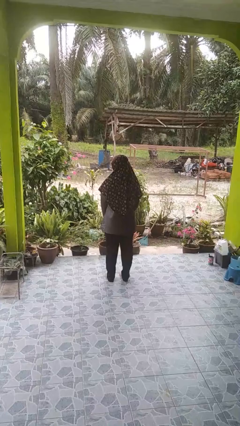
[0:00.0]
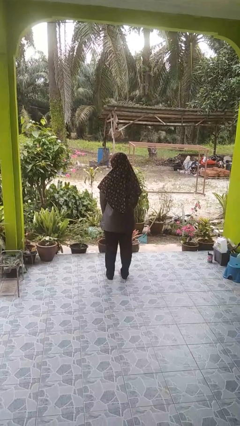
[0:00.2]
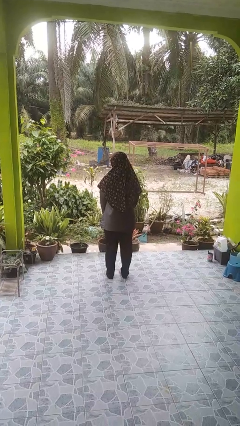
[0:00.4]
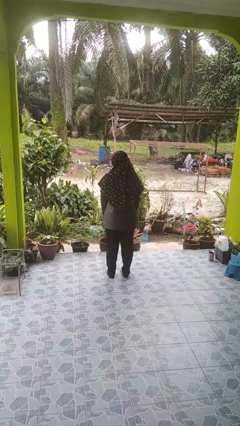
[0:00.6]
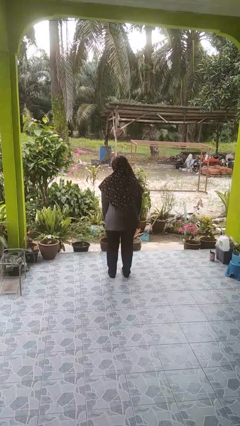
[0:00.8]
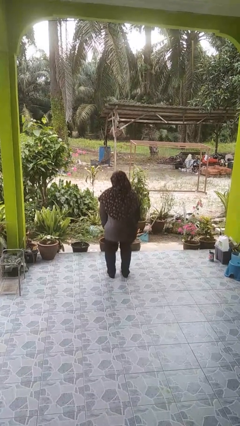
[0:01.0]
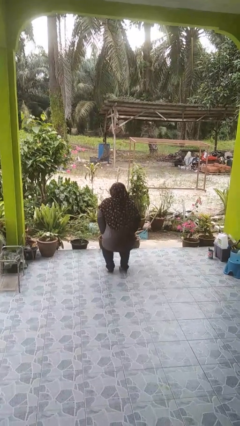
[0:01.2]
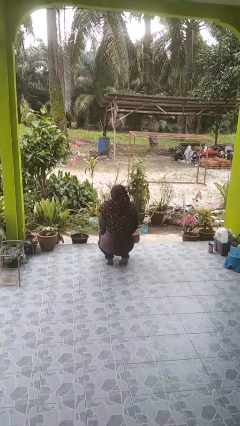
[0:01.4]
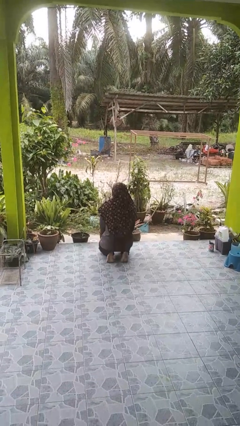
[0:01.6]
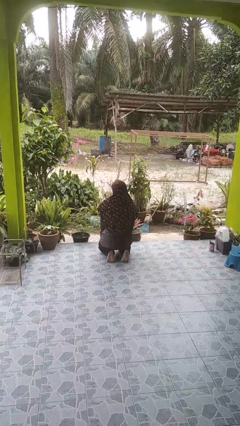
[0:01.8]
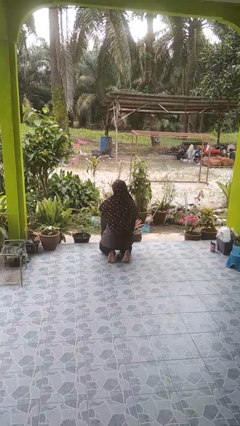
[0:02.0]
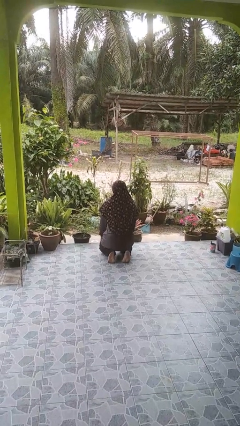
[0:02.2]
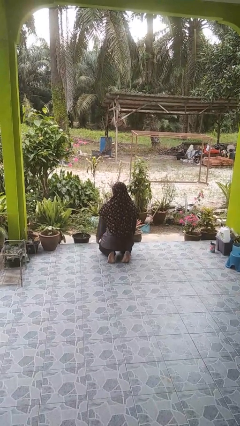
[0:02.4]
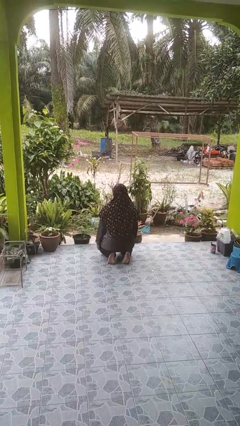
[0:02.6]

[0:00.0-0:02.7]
person kneels

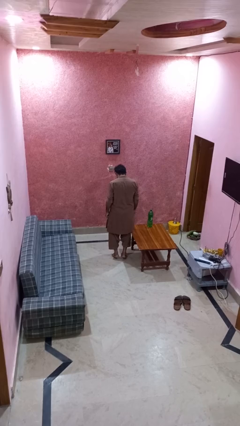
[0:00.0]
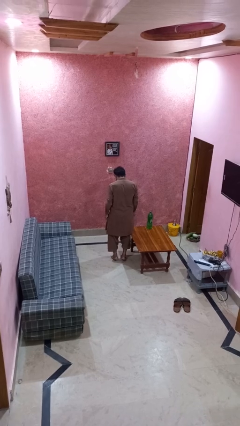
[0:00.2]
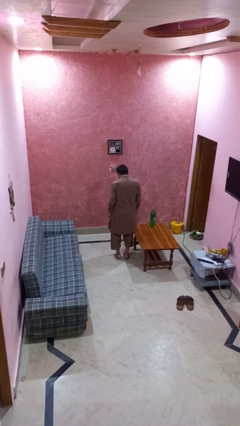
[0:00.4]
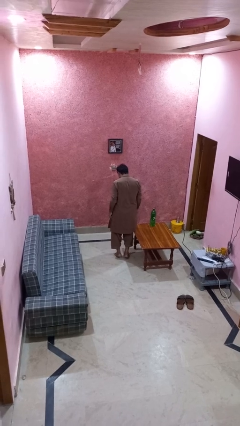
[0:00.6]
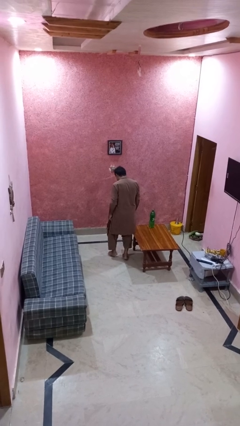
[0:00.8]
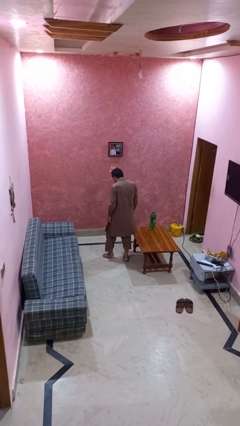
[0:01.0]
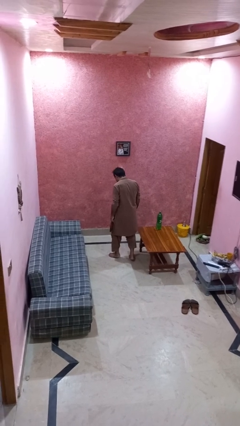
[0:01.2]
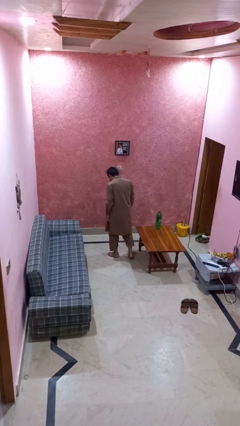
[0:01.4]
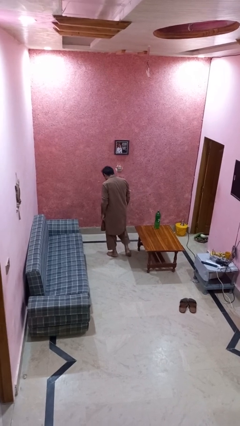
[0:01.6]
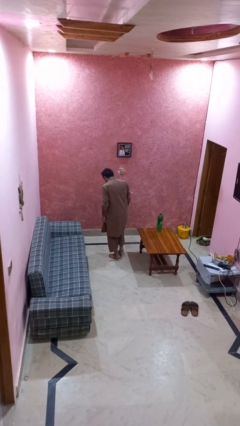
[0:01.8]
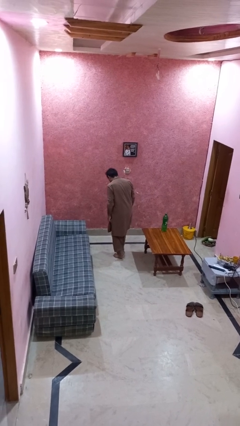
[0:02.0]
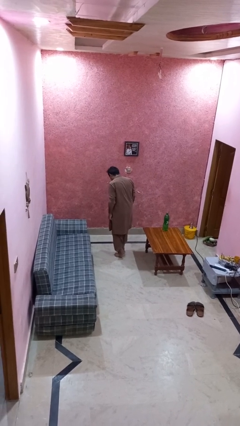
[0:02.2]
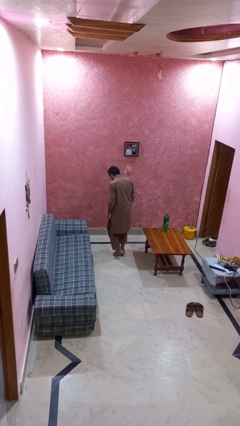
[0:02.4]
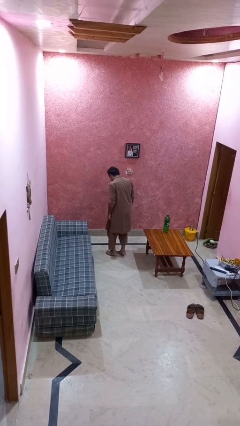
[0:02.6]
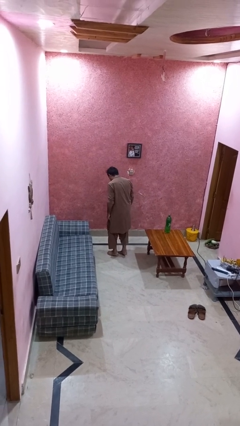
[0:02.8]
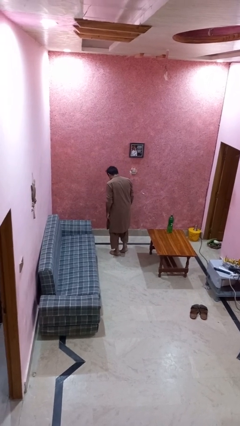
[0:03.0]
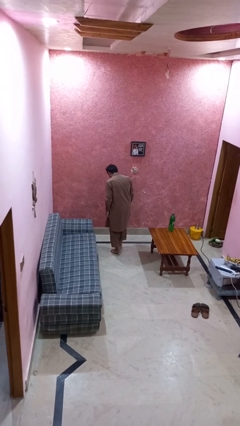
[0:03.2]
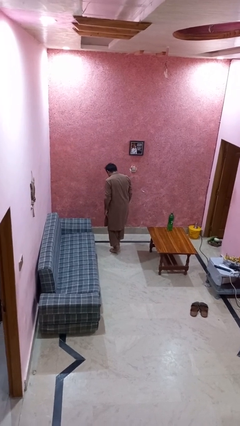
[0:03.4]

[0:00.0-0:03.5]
person walks tiptoe

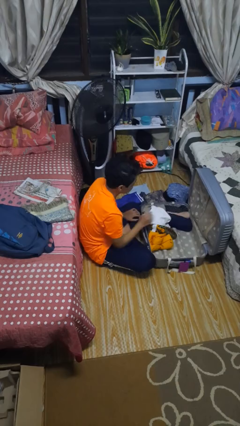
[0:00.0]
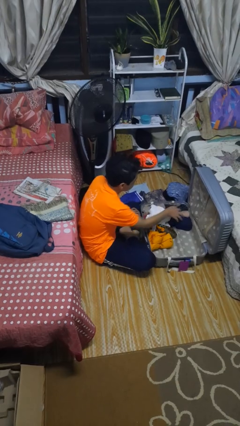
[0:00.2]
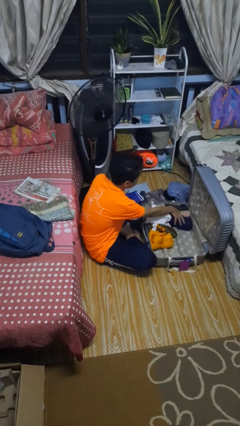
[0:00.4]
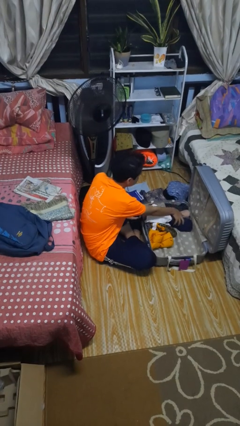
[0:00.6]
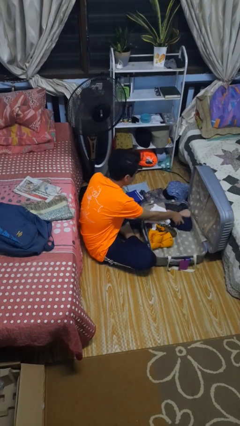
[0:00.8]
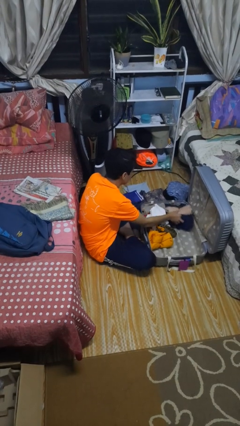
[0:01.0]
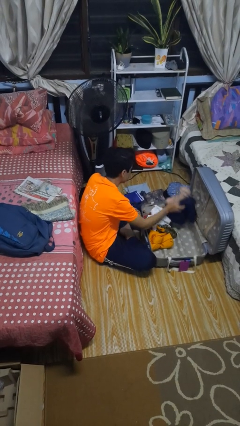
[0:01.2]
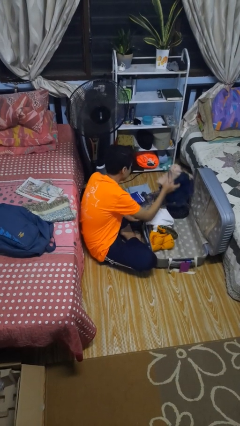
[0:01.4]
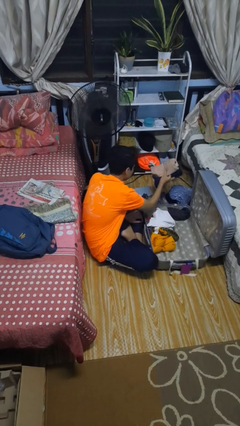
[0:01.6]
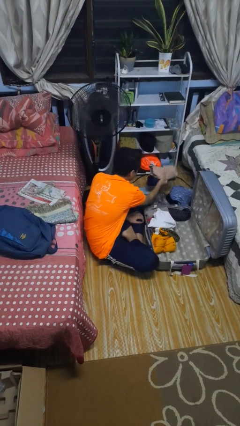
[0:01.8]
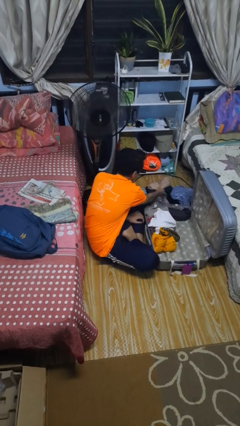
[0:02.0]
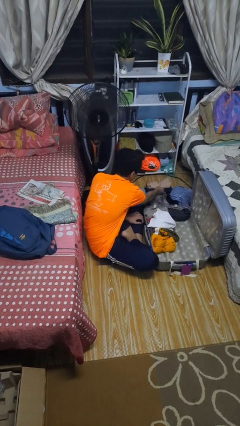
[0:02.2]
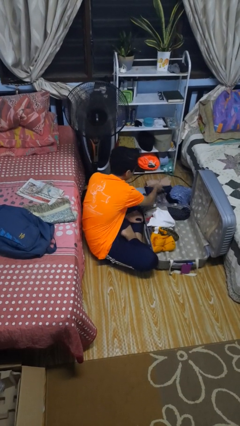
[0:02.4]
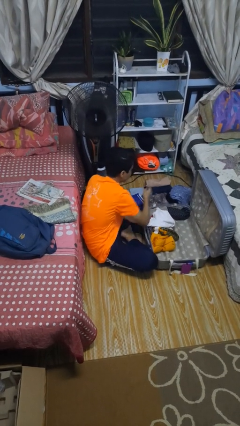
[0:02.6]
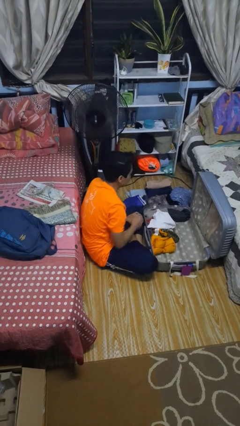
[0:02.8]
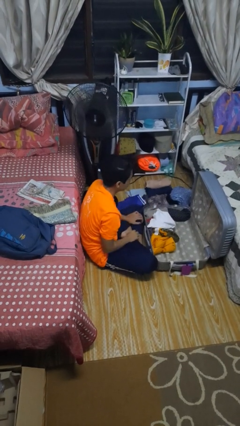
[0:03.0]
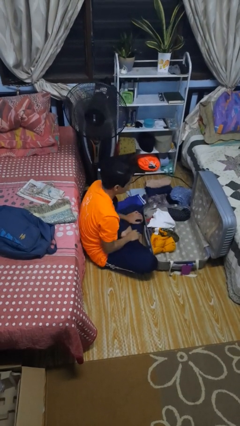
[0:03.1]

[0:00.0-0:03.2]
person unloads clothes from suitcase

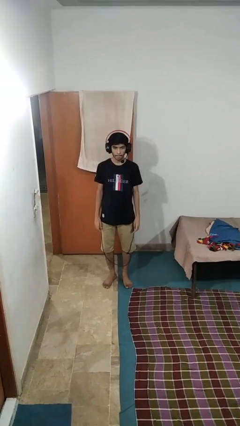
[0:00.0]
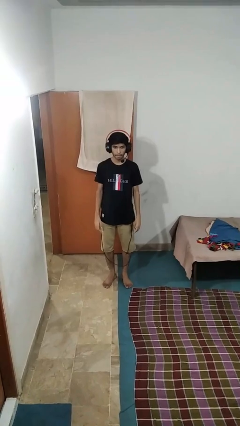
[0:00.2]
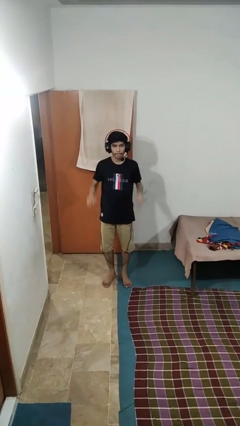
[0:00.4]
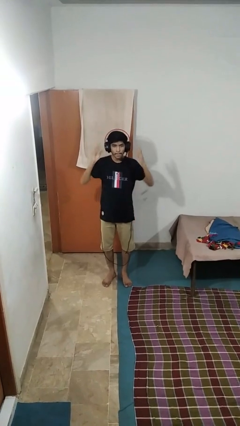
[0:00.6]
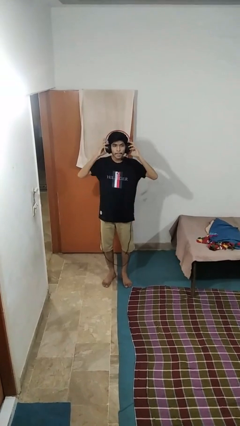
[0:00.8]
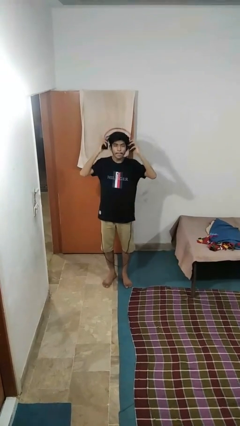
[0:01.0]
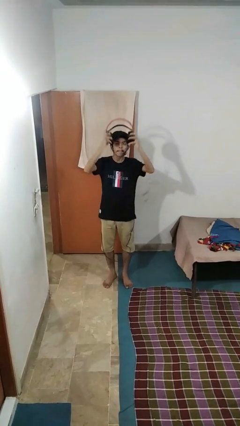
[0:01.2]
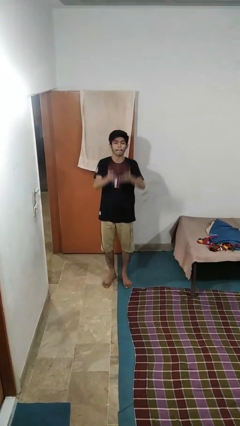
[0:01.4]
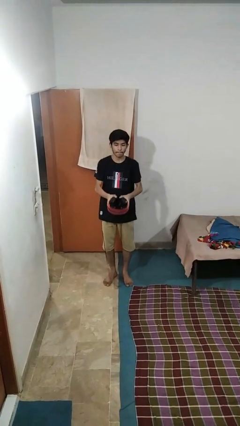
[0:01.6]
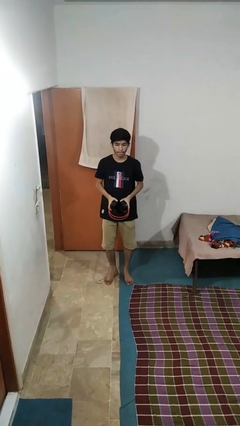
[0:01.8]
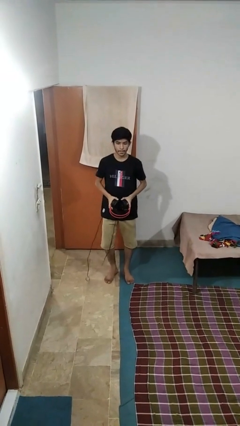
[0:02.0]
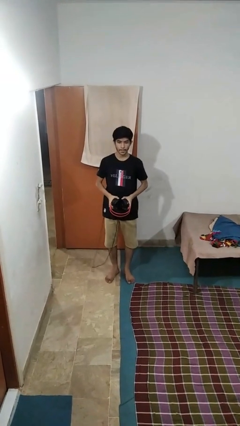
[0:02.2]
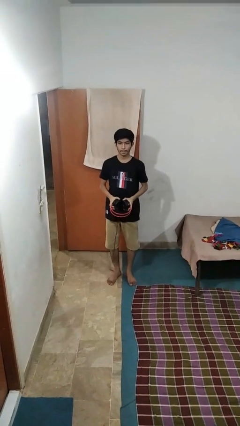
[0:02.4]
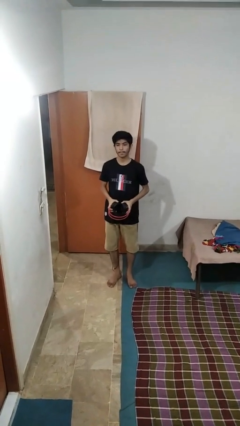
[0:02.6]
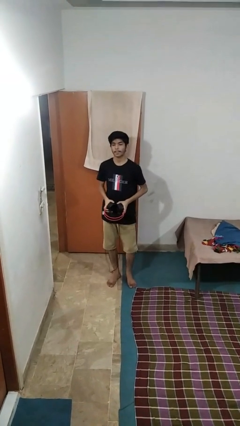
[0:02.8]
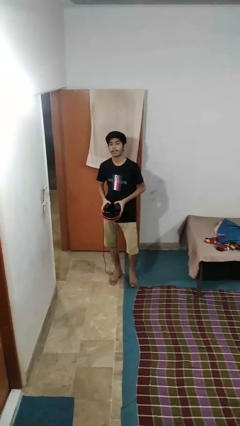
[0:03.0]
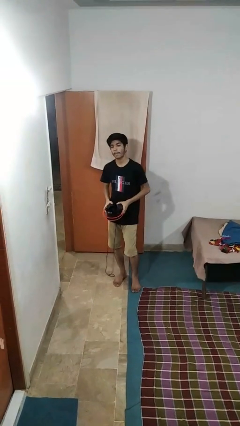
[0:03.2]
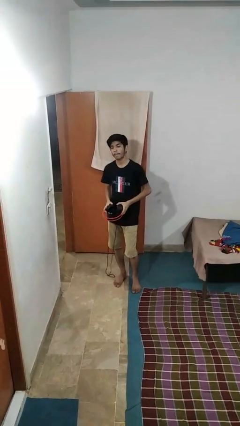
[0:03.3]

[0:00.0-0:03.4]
person takes off headphones

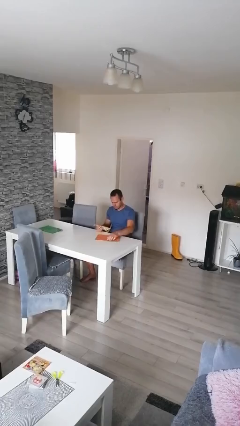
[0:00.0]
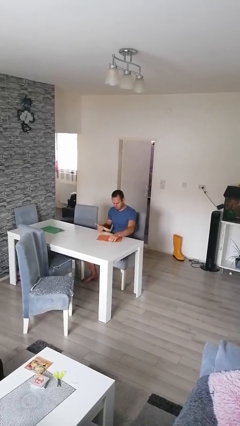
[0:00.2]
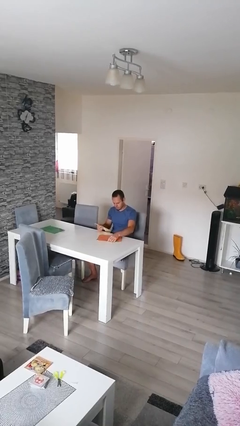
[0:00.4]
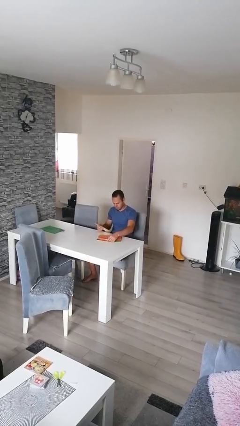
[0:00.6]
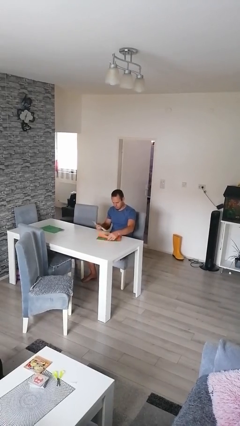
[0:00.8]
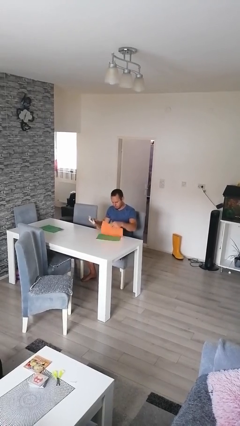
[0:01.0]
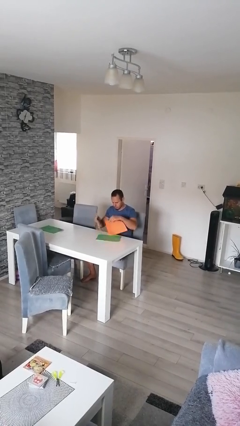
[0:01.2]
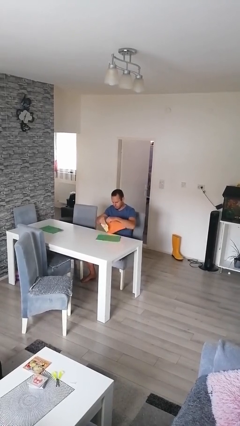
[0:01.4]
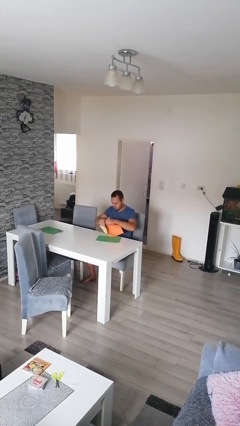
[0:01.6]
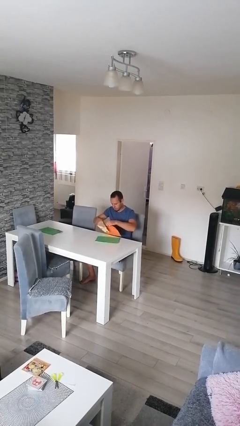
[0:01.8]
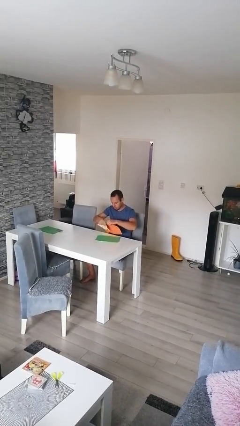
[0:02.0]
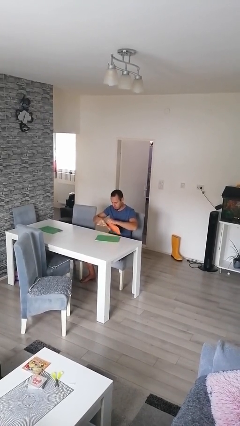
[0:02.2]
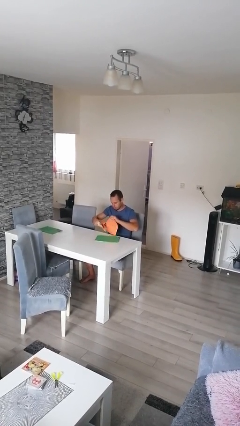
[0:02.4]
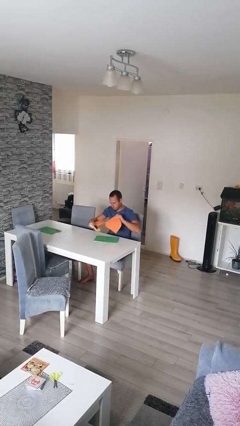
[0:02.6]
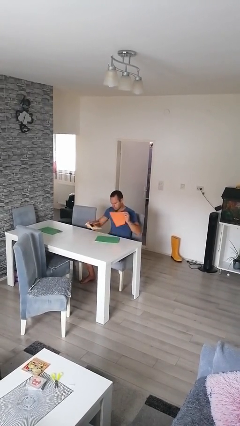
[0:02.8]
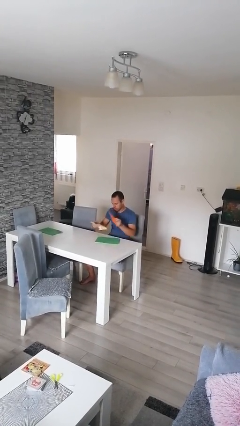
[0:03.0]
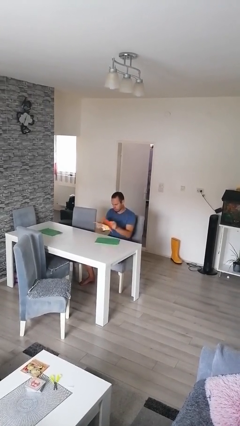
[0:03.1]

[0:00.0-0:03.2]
person tears paper

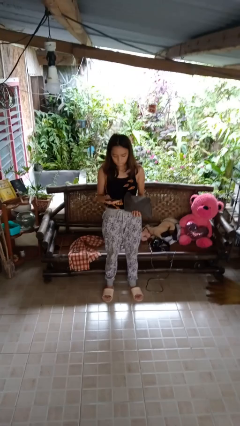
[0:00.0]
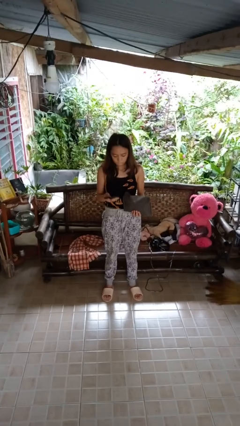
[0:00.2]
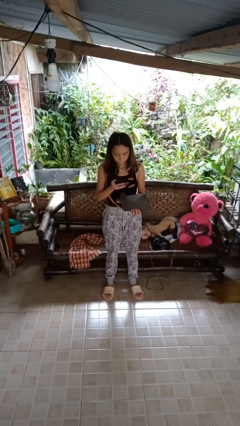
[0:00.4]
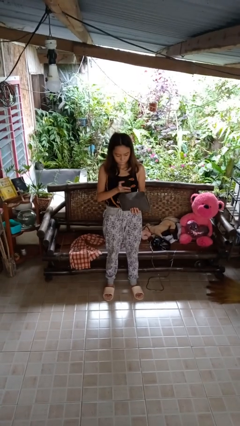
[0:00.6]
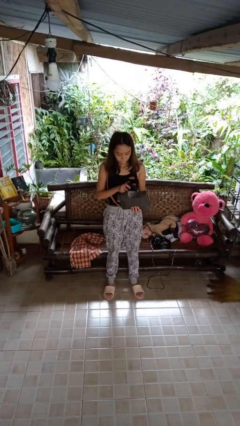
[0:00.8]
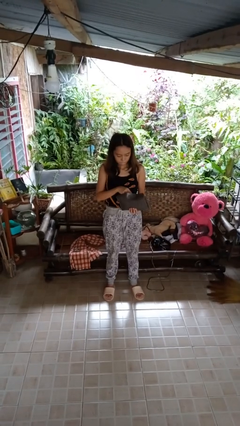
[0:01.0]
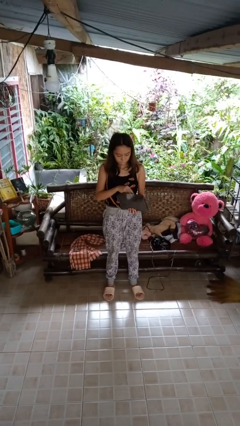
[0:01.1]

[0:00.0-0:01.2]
person puts object into purse
